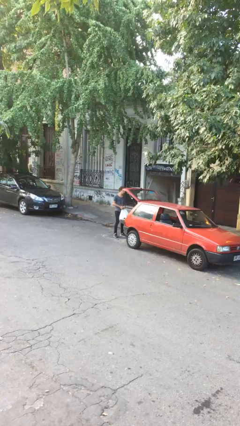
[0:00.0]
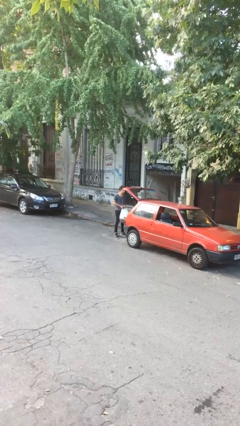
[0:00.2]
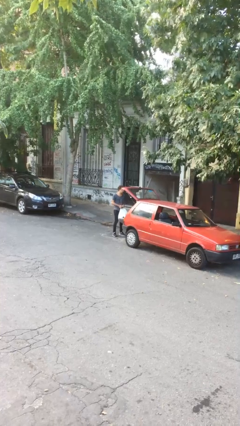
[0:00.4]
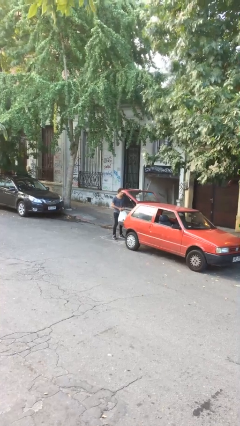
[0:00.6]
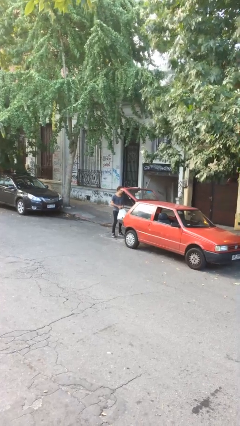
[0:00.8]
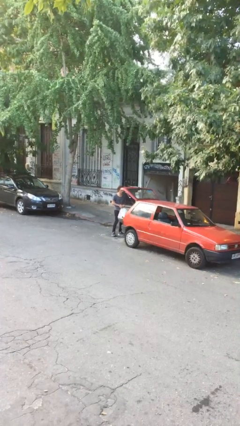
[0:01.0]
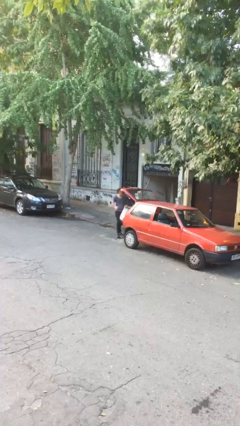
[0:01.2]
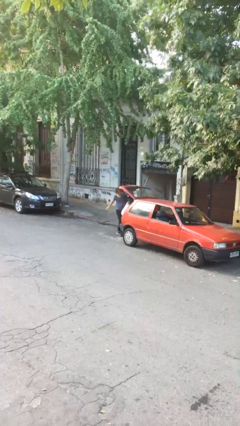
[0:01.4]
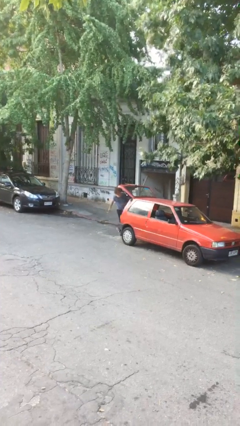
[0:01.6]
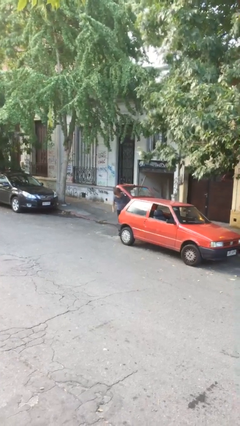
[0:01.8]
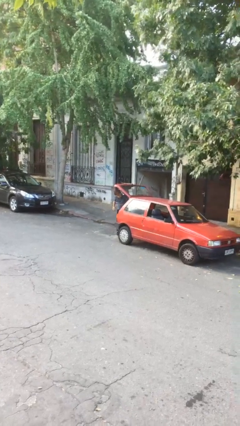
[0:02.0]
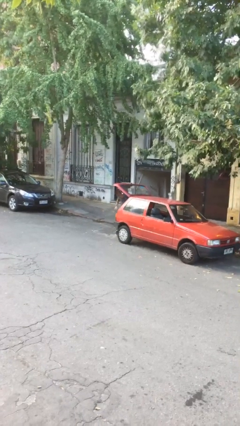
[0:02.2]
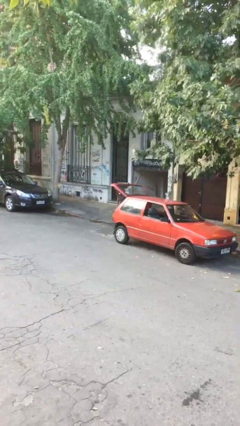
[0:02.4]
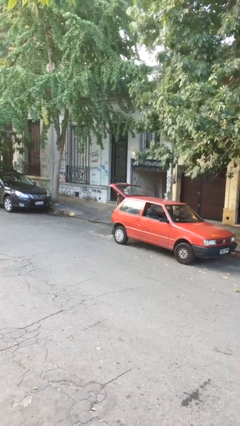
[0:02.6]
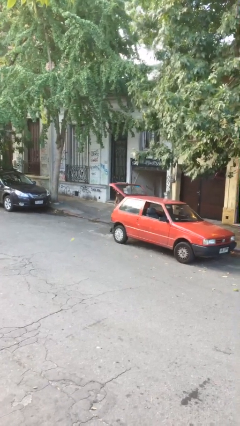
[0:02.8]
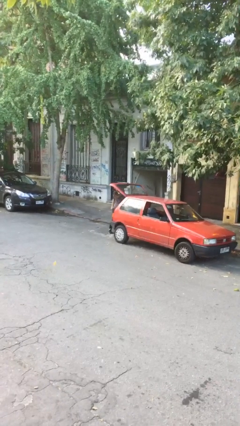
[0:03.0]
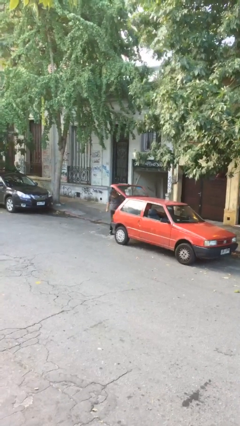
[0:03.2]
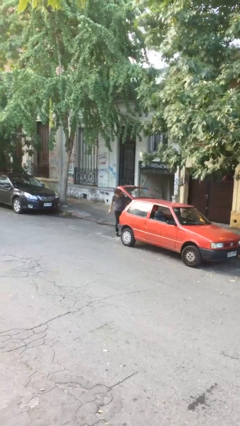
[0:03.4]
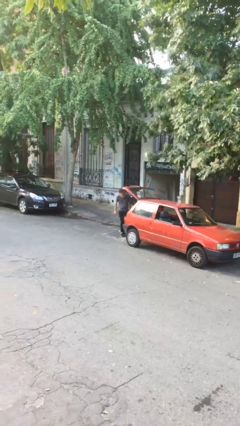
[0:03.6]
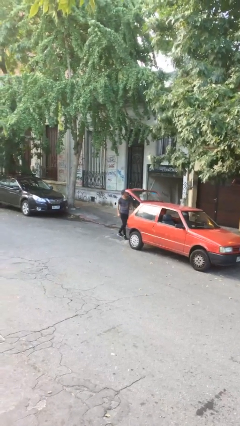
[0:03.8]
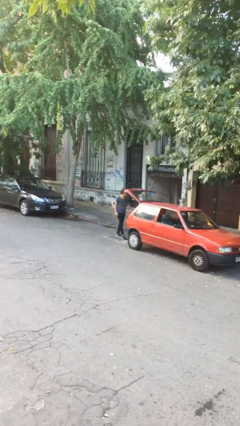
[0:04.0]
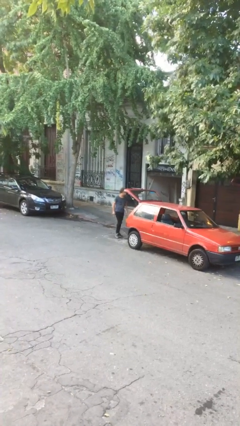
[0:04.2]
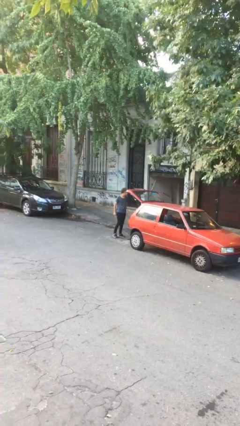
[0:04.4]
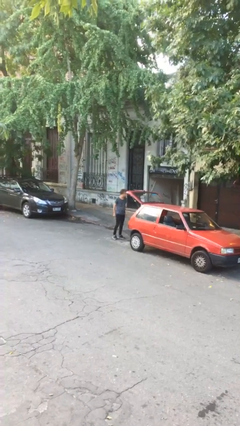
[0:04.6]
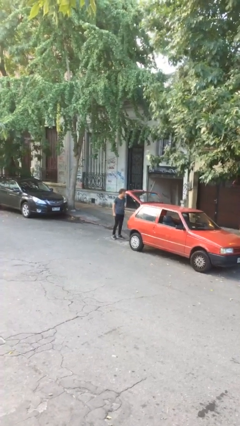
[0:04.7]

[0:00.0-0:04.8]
person loads car

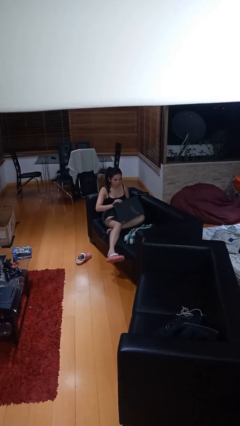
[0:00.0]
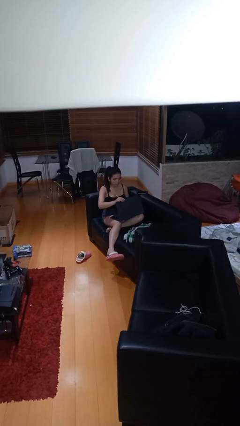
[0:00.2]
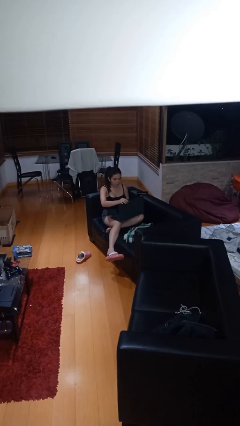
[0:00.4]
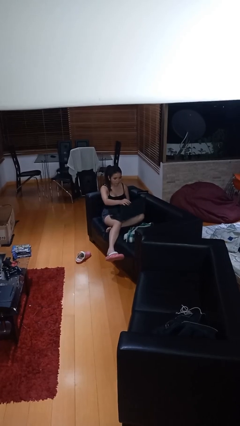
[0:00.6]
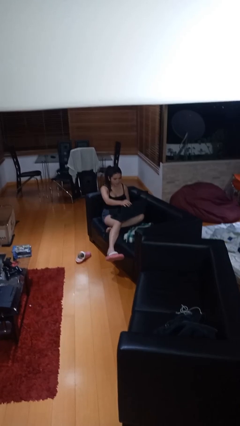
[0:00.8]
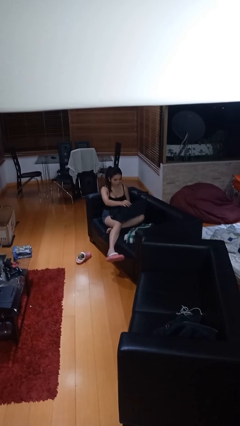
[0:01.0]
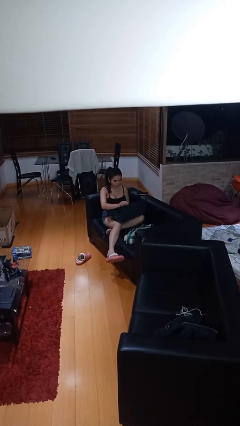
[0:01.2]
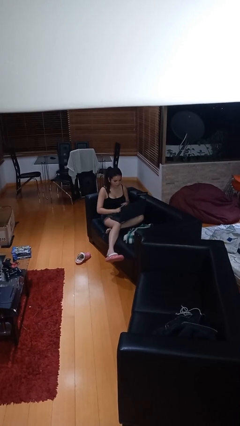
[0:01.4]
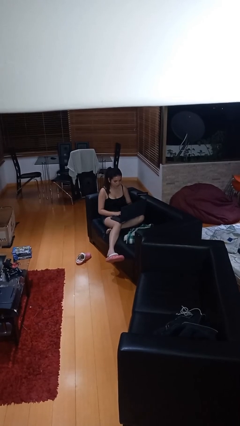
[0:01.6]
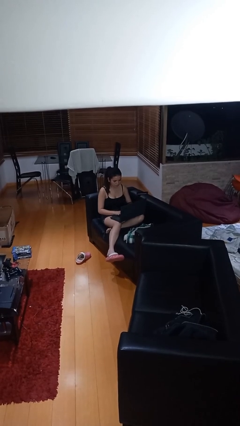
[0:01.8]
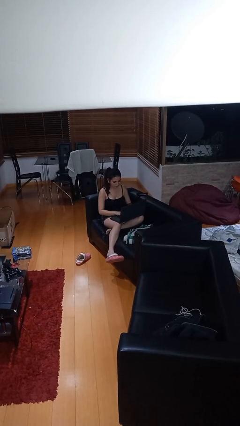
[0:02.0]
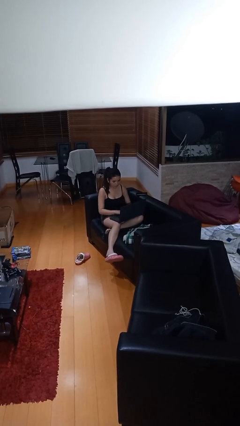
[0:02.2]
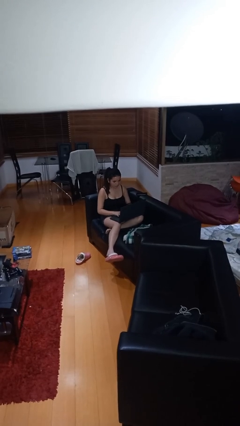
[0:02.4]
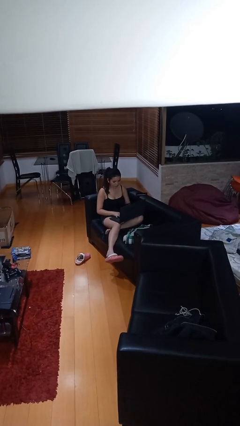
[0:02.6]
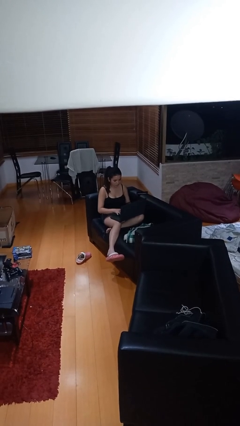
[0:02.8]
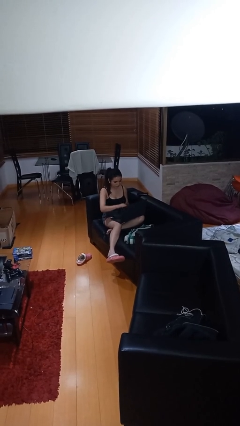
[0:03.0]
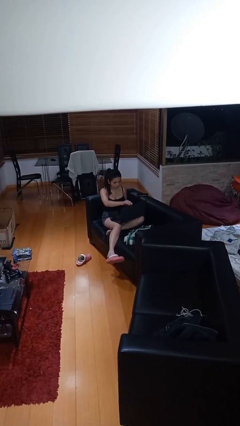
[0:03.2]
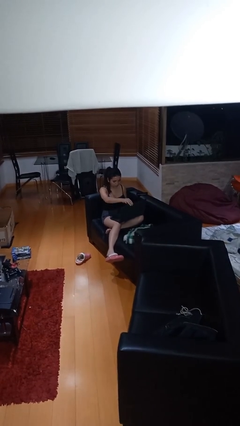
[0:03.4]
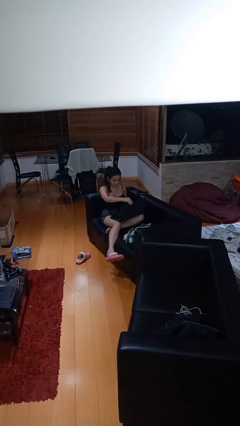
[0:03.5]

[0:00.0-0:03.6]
person interacts with laptop

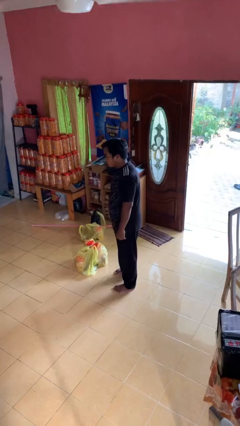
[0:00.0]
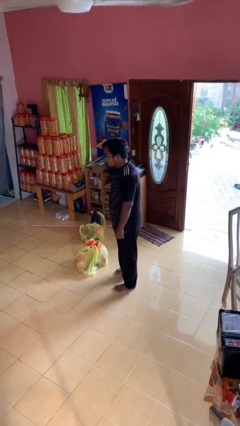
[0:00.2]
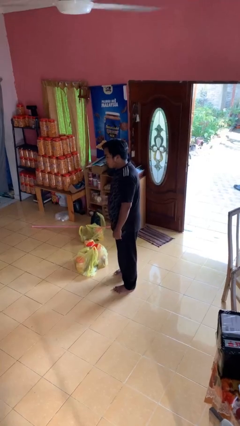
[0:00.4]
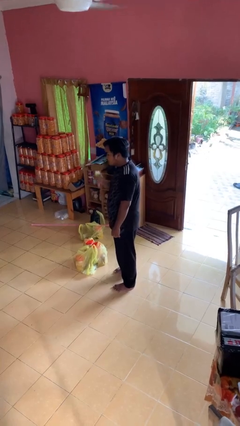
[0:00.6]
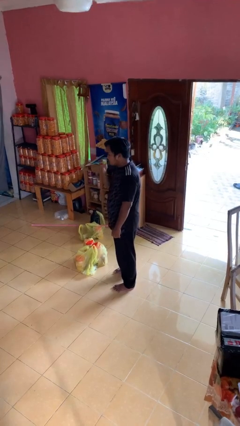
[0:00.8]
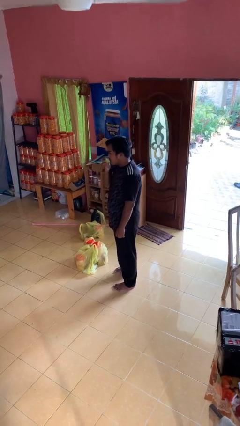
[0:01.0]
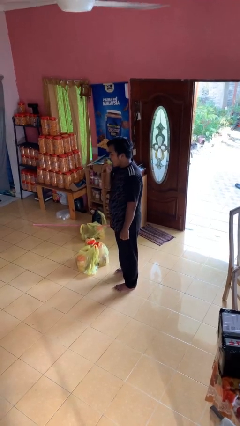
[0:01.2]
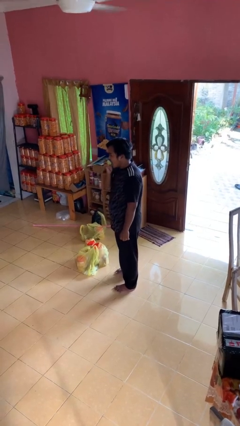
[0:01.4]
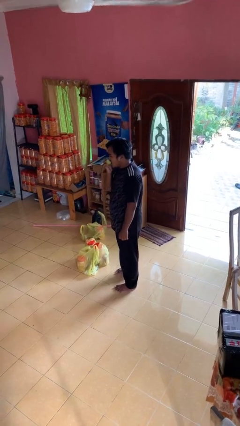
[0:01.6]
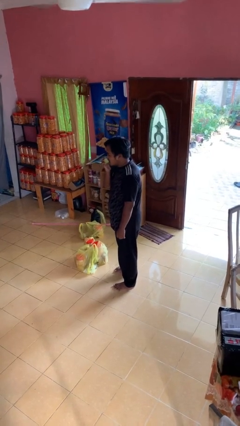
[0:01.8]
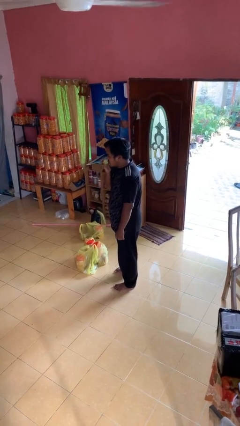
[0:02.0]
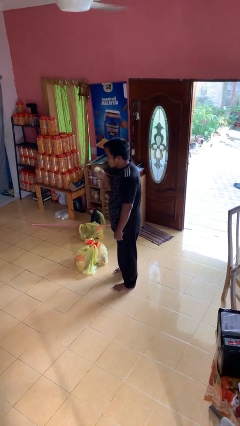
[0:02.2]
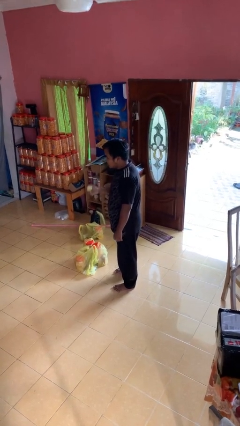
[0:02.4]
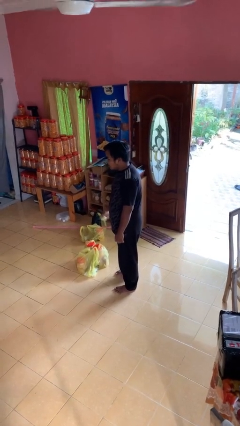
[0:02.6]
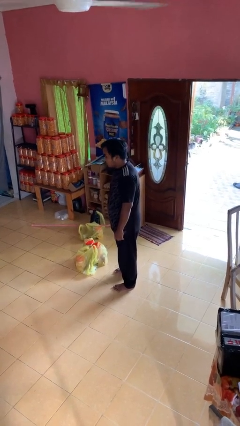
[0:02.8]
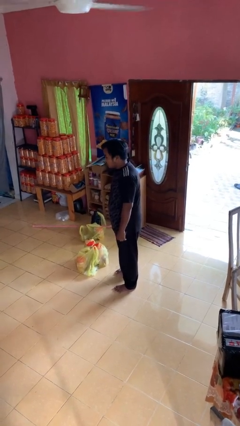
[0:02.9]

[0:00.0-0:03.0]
person eats apple

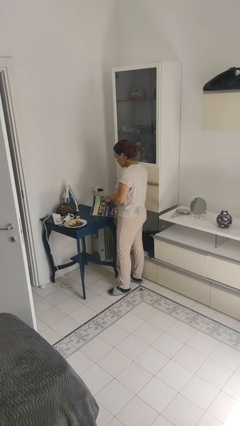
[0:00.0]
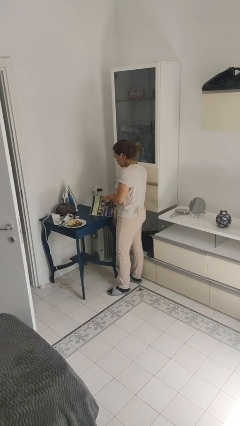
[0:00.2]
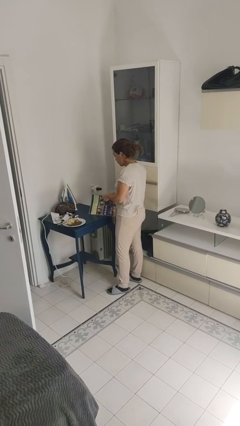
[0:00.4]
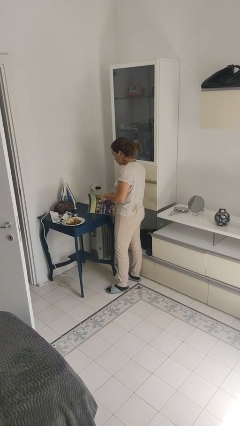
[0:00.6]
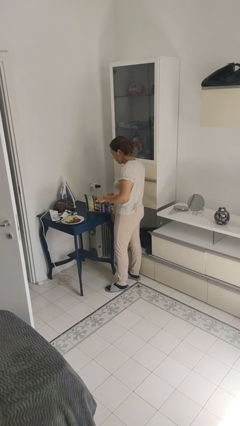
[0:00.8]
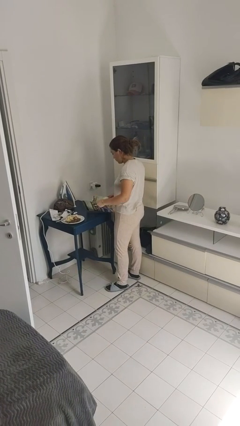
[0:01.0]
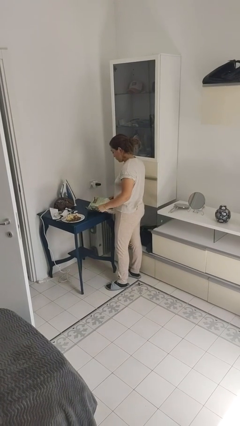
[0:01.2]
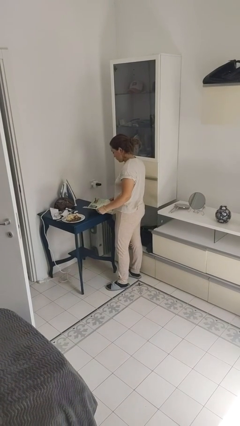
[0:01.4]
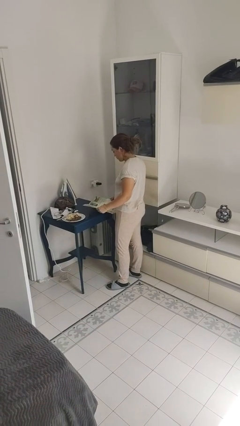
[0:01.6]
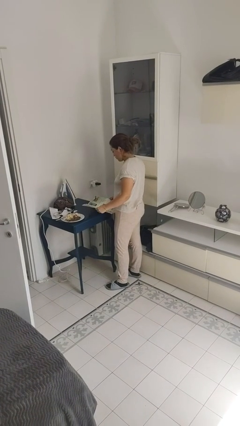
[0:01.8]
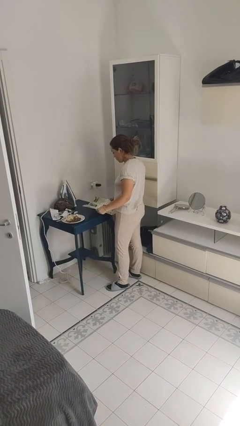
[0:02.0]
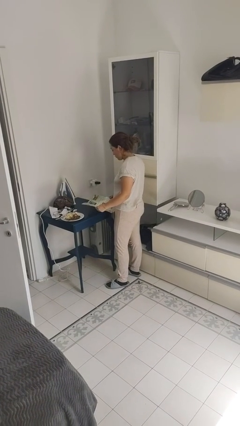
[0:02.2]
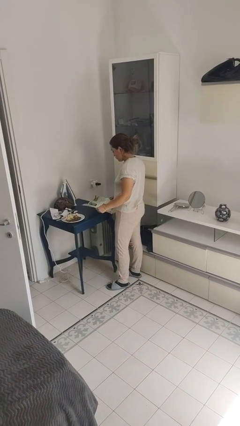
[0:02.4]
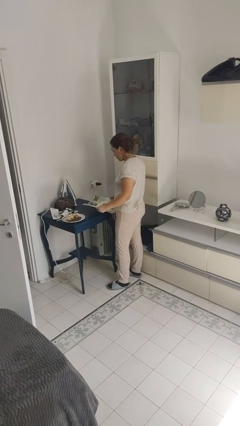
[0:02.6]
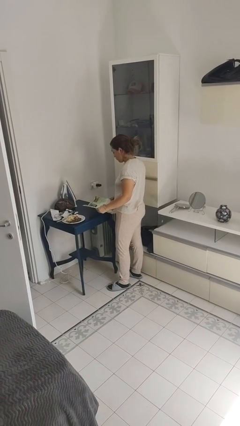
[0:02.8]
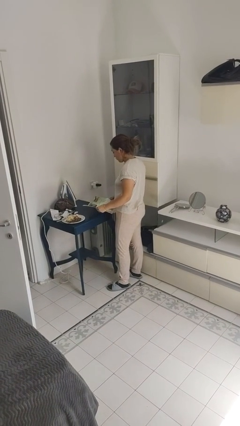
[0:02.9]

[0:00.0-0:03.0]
person reads magazine

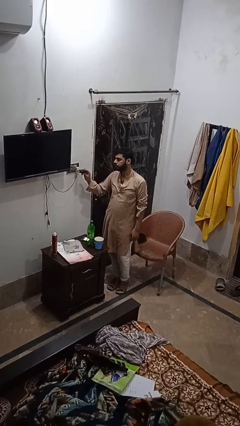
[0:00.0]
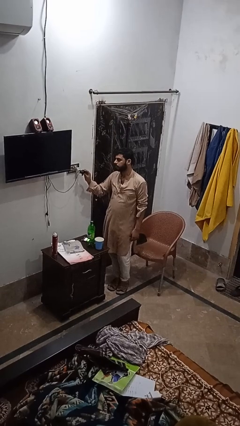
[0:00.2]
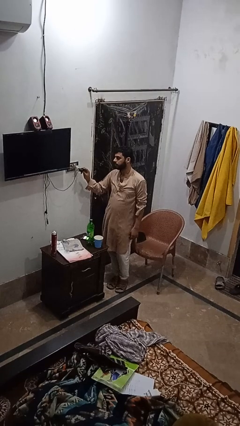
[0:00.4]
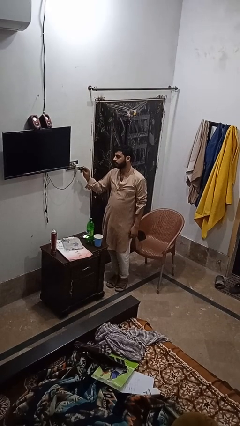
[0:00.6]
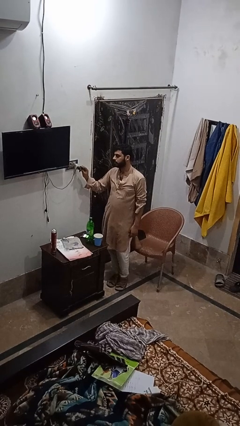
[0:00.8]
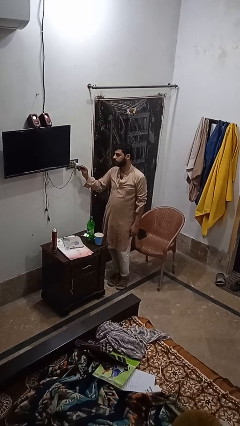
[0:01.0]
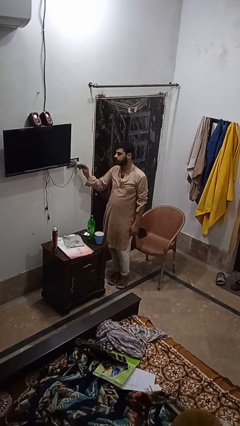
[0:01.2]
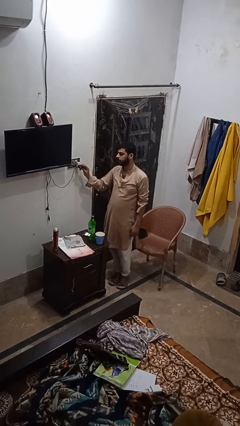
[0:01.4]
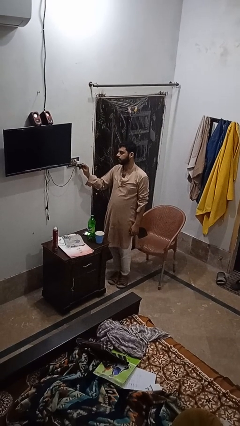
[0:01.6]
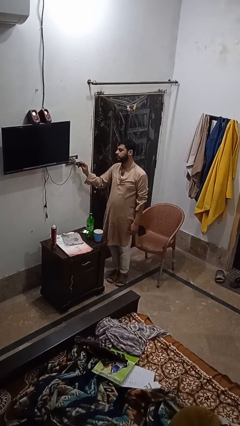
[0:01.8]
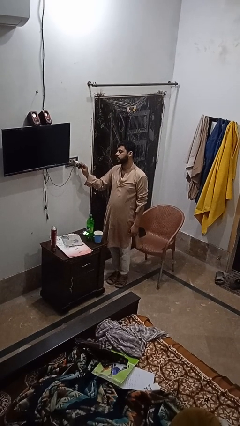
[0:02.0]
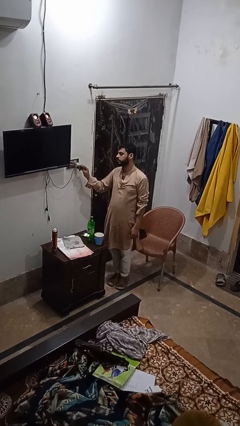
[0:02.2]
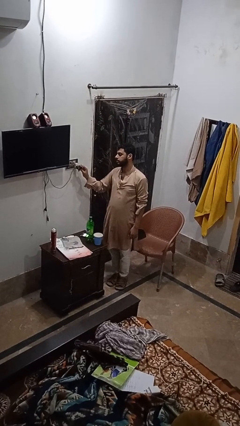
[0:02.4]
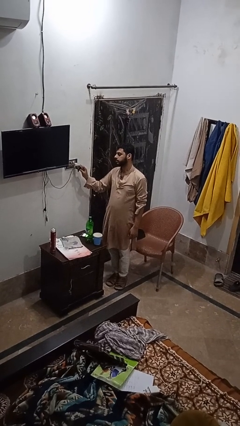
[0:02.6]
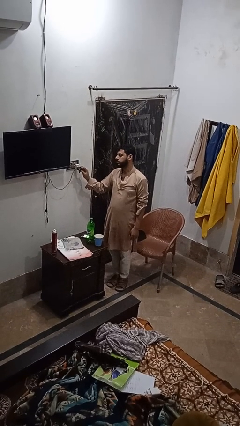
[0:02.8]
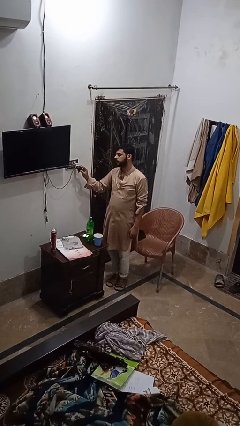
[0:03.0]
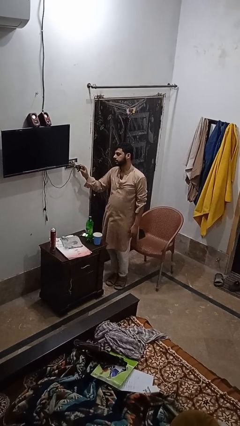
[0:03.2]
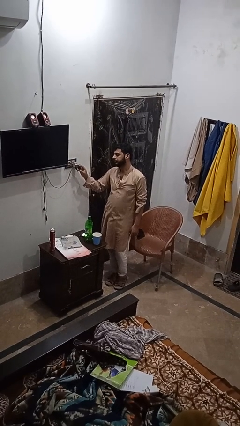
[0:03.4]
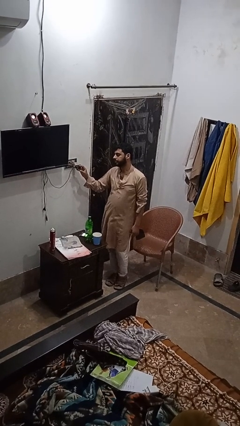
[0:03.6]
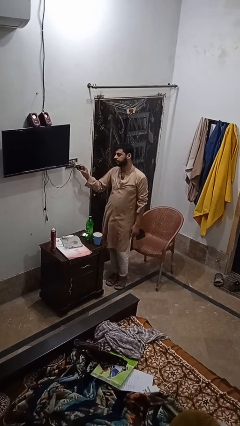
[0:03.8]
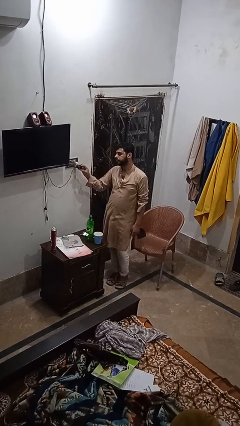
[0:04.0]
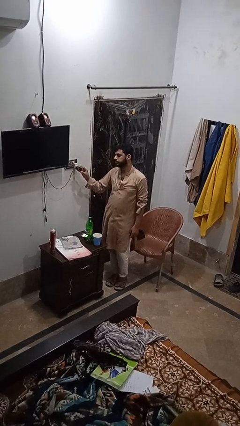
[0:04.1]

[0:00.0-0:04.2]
person plugs into electrical socket
